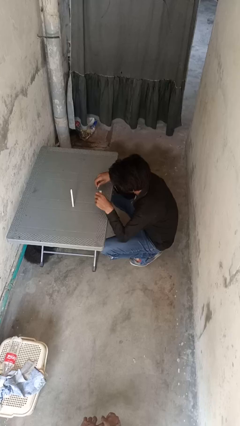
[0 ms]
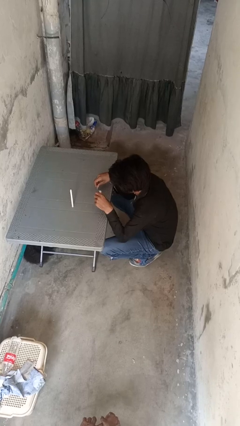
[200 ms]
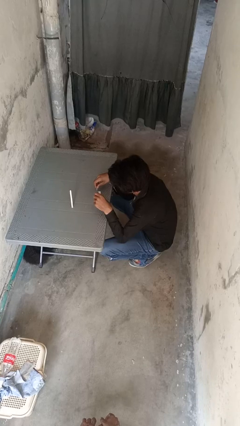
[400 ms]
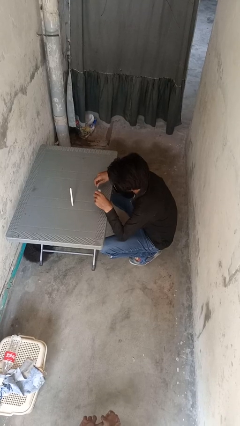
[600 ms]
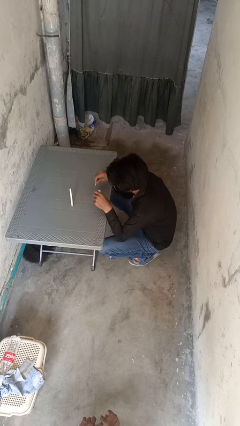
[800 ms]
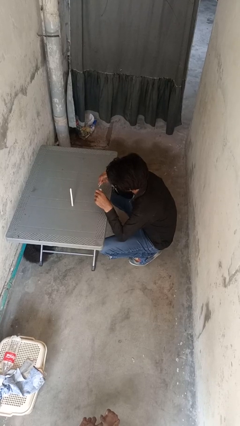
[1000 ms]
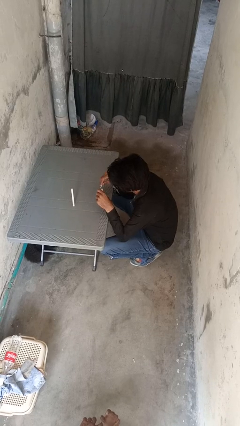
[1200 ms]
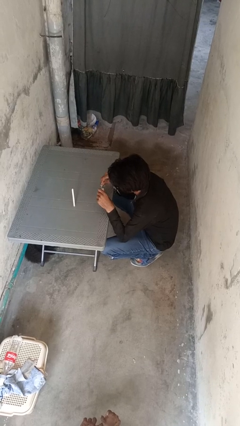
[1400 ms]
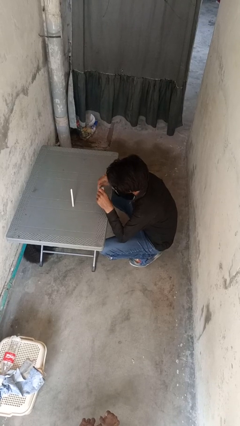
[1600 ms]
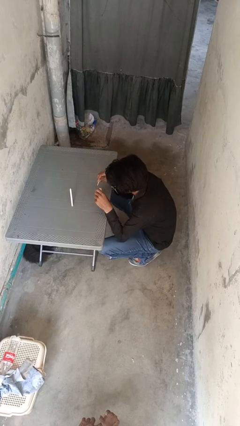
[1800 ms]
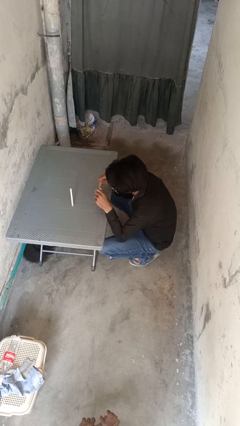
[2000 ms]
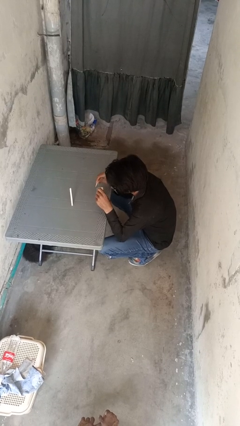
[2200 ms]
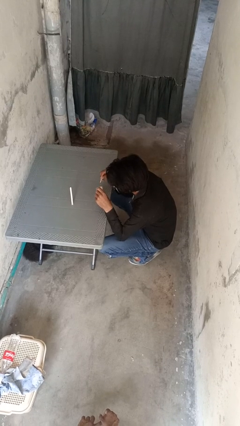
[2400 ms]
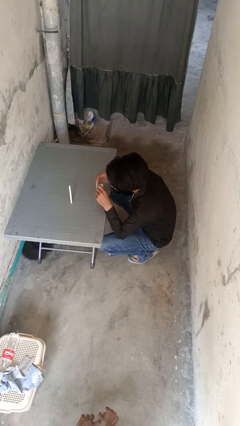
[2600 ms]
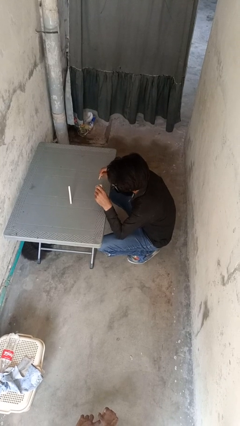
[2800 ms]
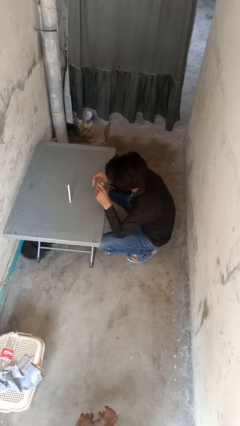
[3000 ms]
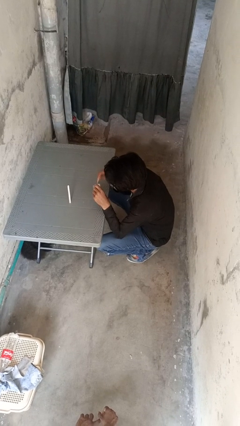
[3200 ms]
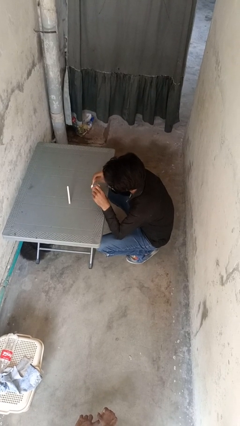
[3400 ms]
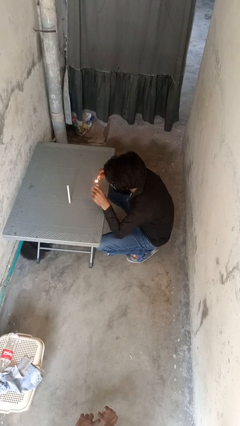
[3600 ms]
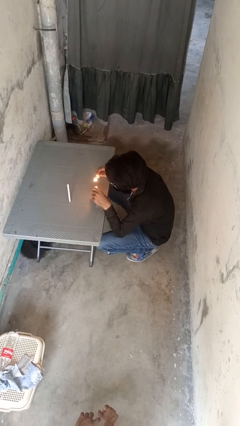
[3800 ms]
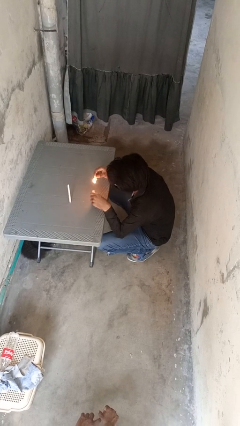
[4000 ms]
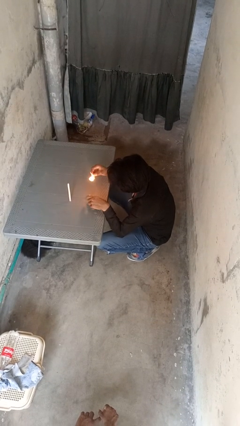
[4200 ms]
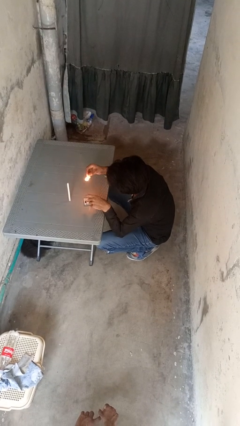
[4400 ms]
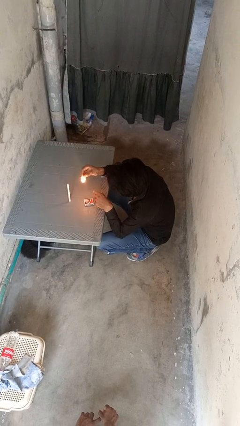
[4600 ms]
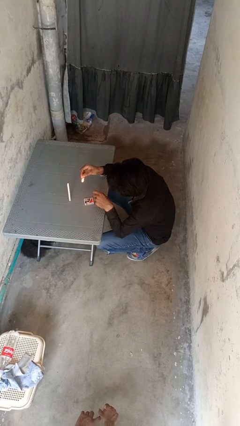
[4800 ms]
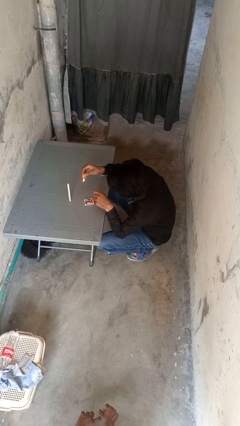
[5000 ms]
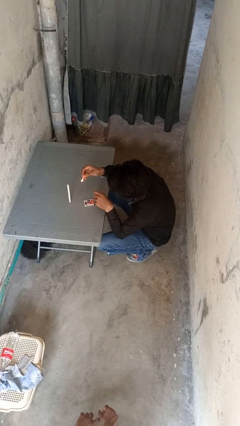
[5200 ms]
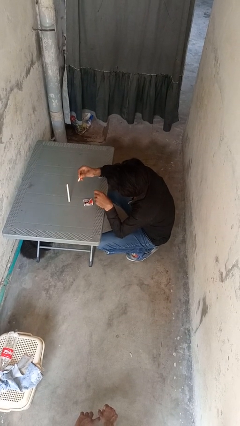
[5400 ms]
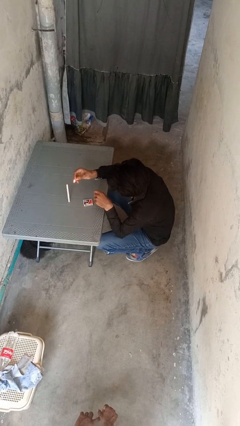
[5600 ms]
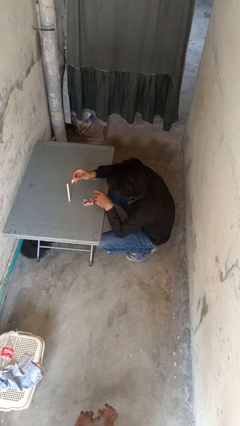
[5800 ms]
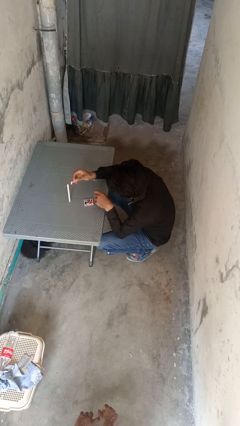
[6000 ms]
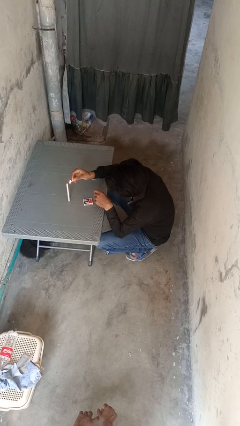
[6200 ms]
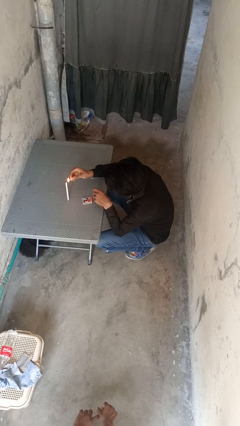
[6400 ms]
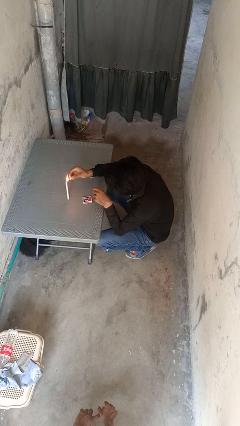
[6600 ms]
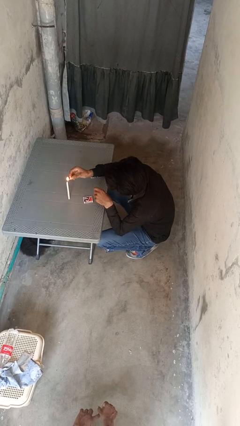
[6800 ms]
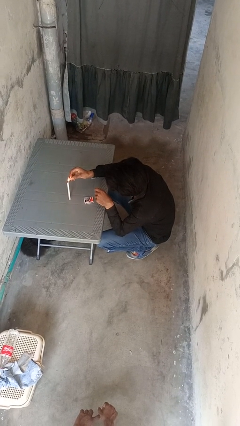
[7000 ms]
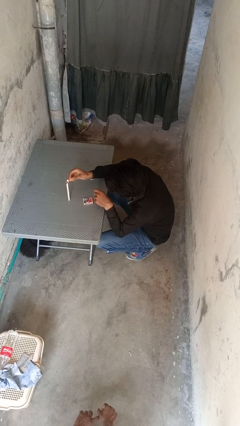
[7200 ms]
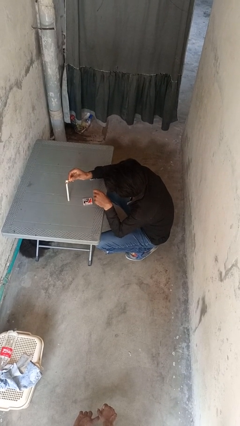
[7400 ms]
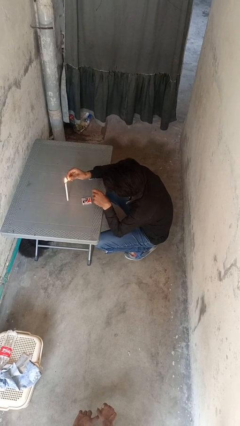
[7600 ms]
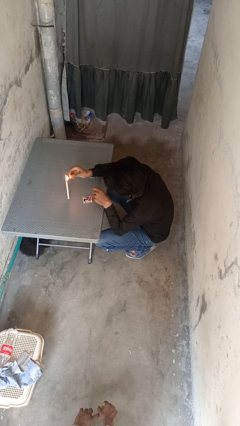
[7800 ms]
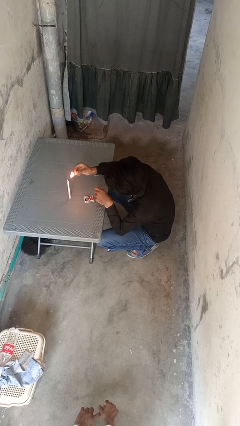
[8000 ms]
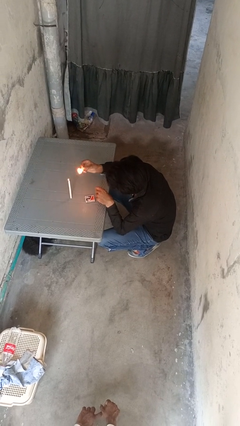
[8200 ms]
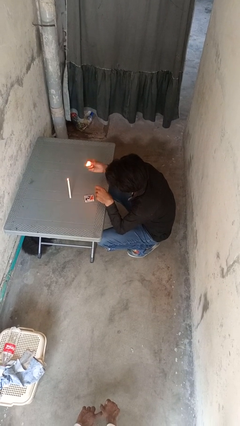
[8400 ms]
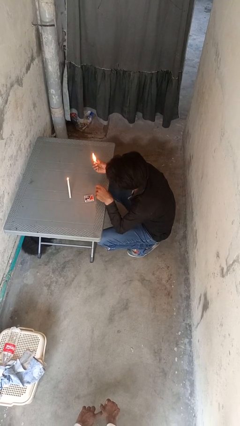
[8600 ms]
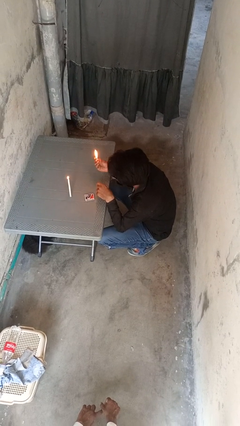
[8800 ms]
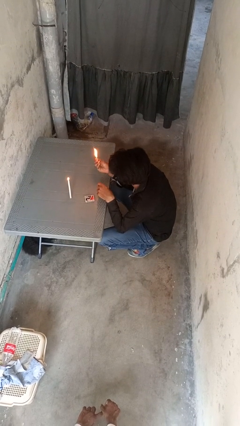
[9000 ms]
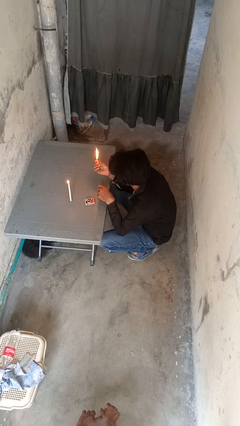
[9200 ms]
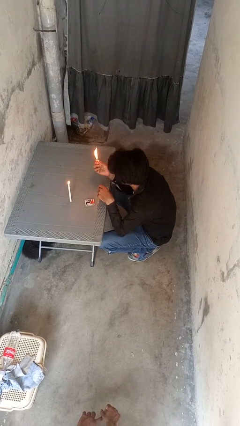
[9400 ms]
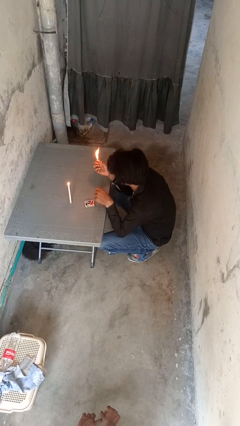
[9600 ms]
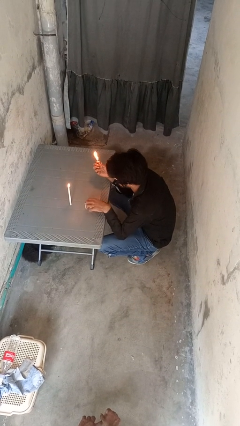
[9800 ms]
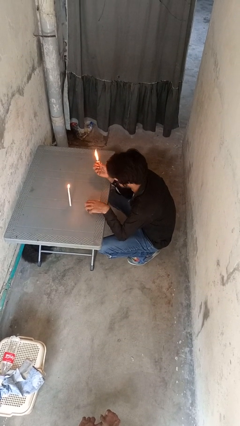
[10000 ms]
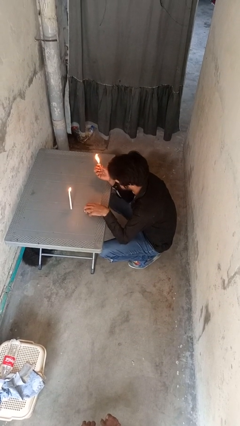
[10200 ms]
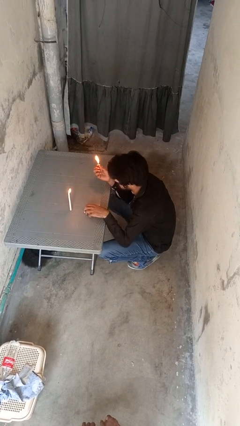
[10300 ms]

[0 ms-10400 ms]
person lights candle

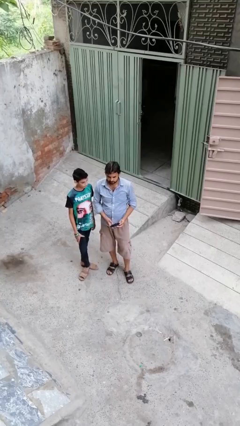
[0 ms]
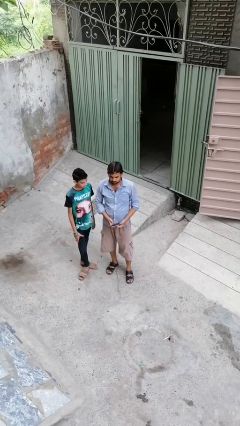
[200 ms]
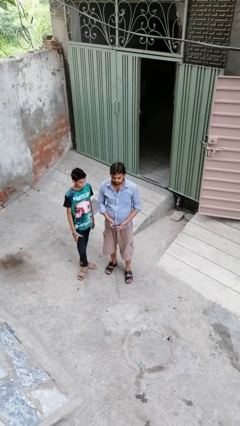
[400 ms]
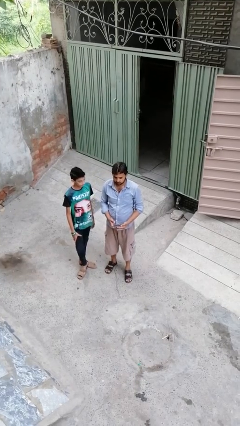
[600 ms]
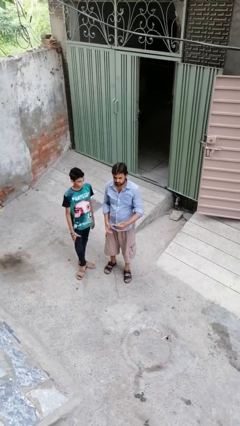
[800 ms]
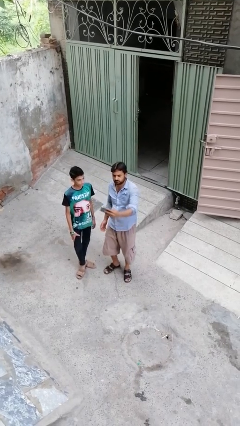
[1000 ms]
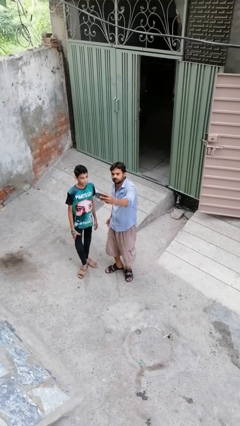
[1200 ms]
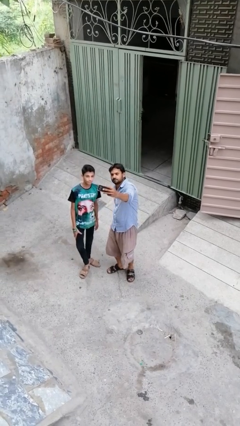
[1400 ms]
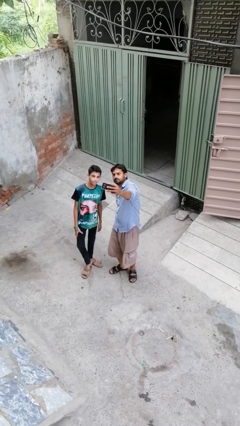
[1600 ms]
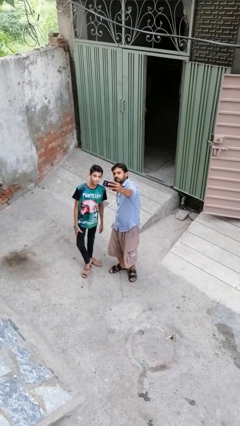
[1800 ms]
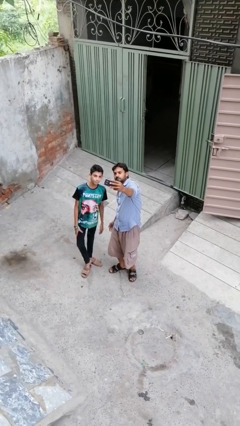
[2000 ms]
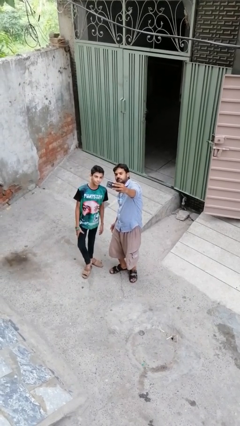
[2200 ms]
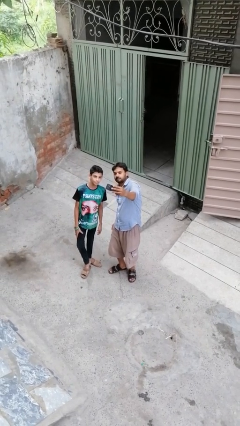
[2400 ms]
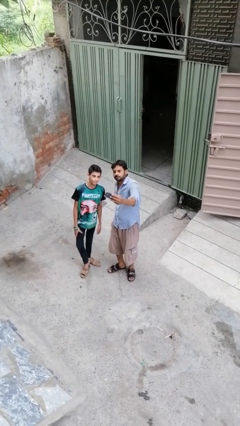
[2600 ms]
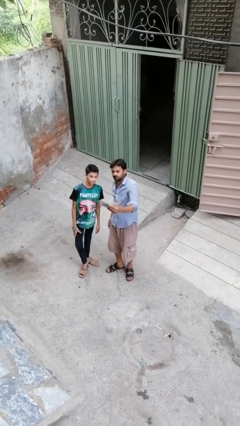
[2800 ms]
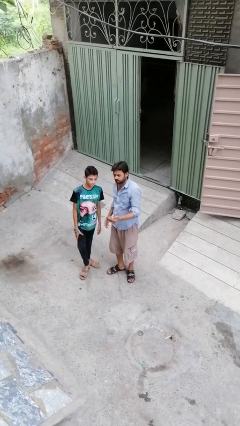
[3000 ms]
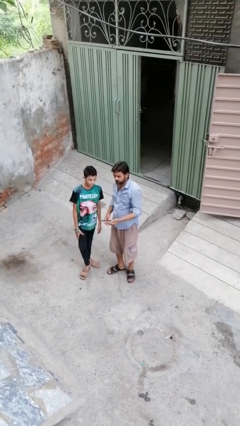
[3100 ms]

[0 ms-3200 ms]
person takes selfie with person

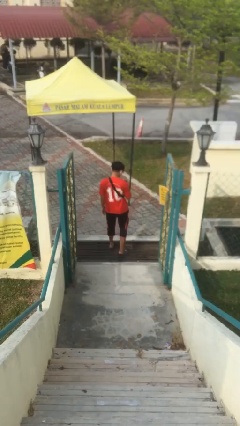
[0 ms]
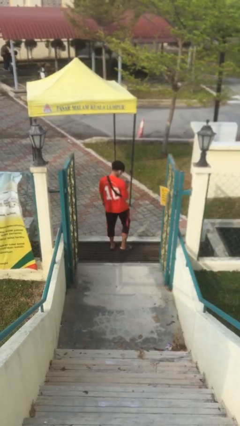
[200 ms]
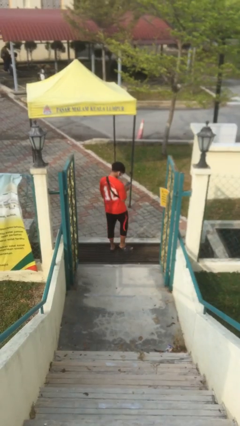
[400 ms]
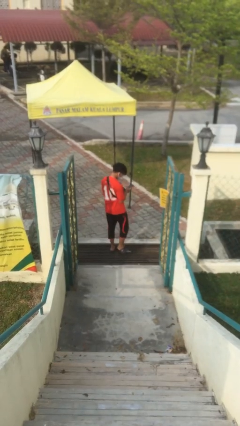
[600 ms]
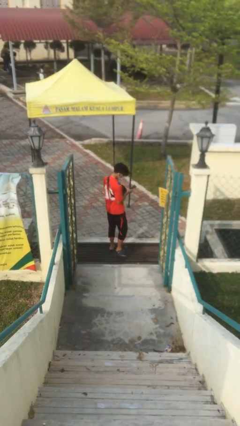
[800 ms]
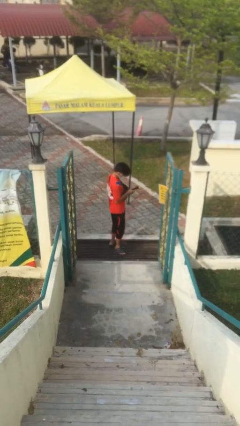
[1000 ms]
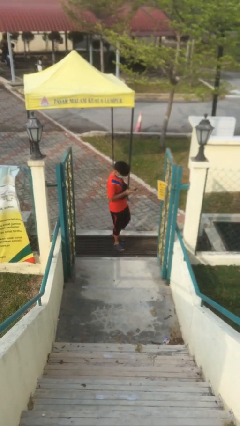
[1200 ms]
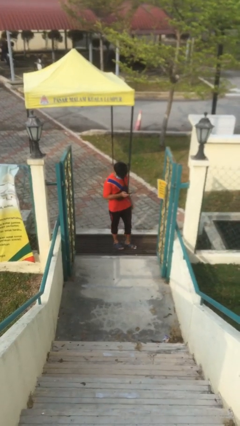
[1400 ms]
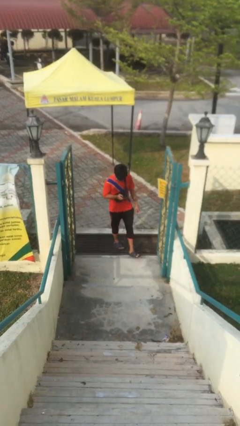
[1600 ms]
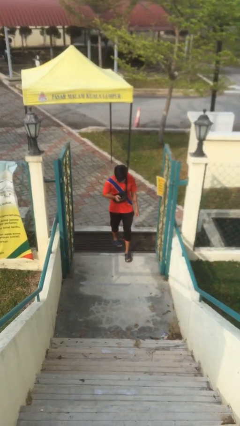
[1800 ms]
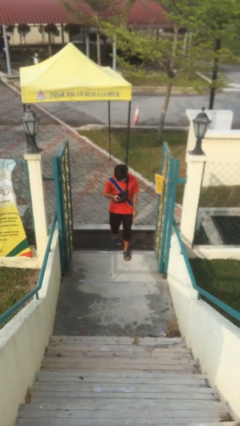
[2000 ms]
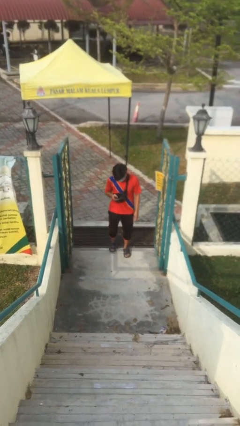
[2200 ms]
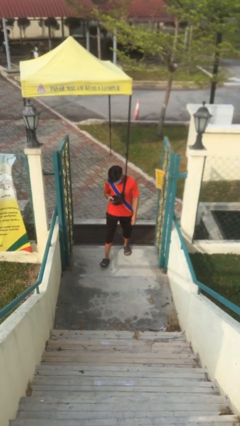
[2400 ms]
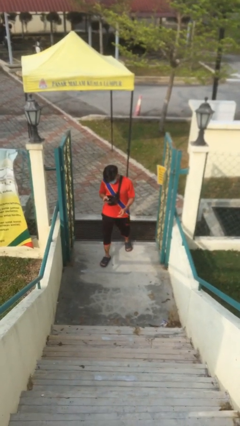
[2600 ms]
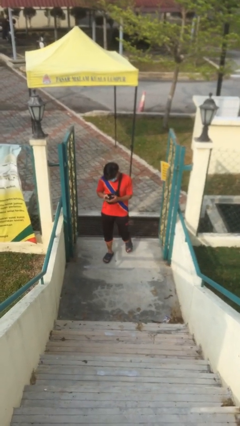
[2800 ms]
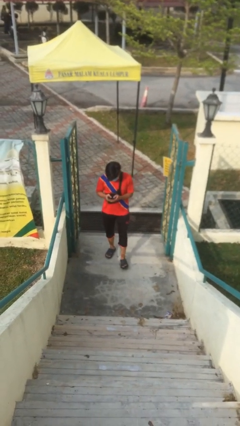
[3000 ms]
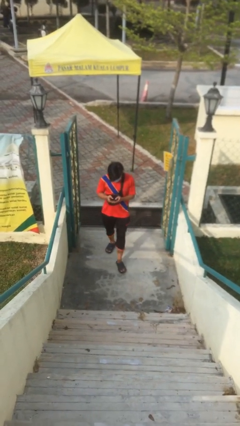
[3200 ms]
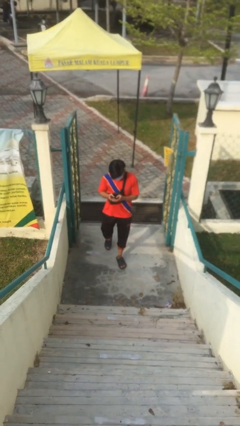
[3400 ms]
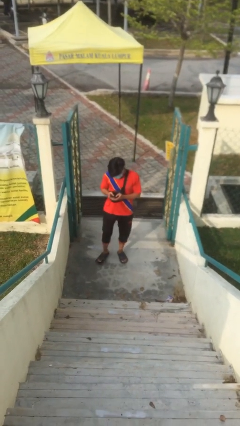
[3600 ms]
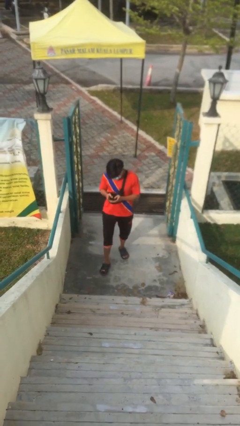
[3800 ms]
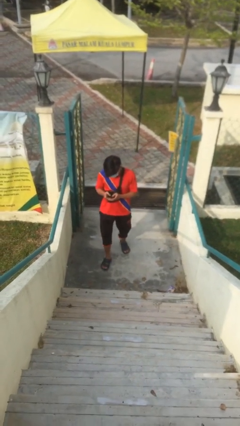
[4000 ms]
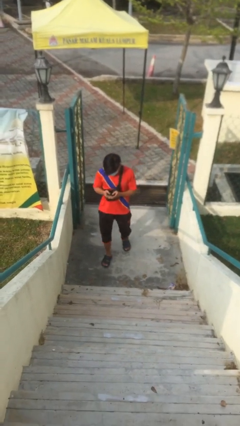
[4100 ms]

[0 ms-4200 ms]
person enters scene through structure

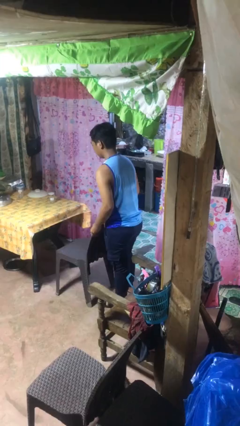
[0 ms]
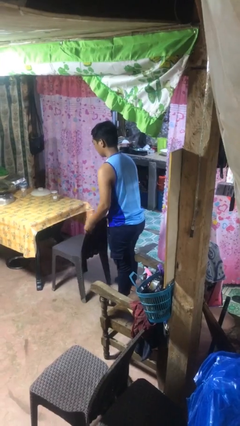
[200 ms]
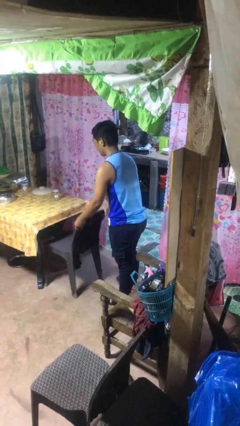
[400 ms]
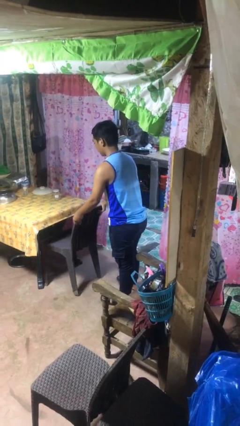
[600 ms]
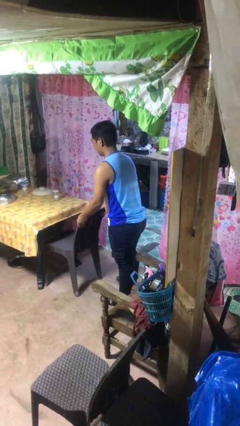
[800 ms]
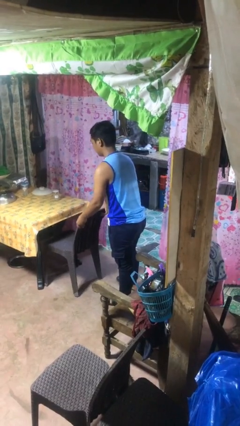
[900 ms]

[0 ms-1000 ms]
person pushes in chair
